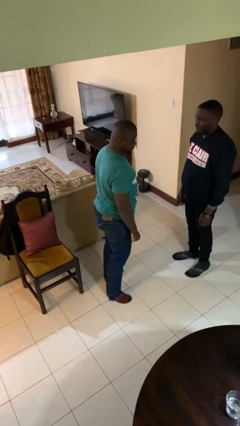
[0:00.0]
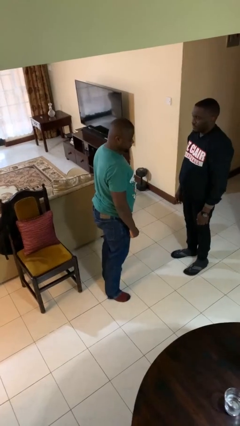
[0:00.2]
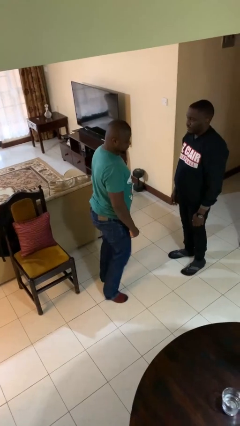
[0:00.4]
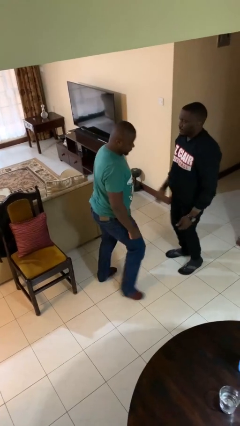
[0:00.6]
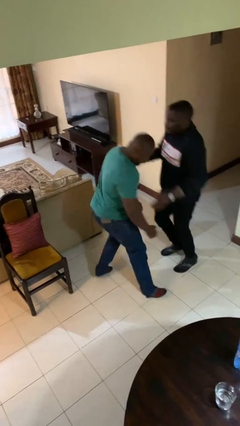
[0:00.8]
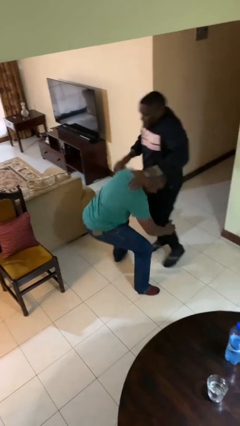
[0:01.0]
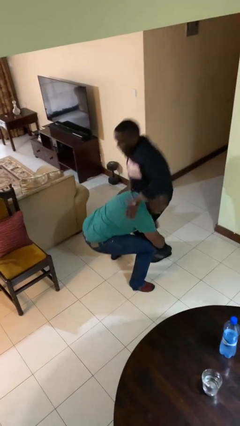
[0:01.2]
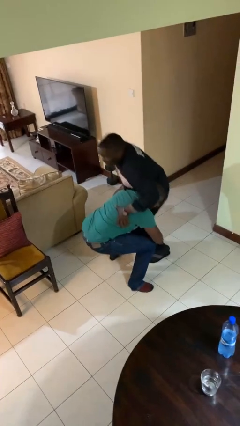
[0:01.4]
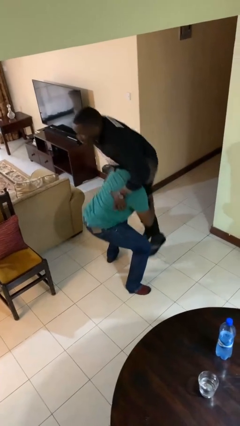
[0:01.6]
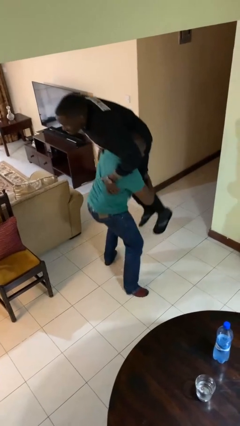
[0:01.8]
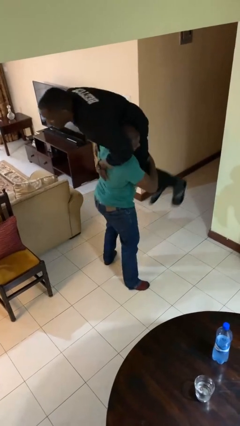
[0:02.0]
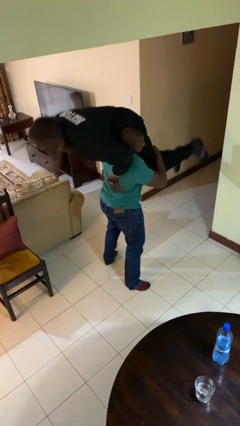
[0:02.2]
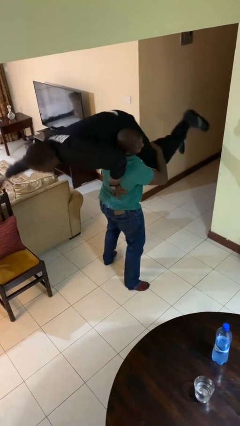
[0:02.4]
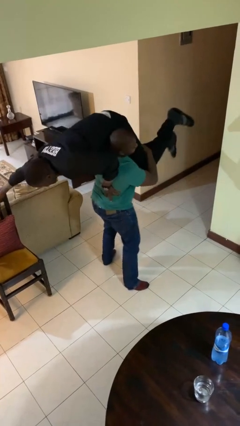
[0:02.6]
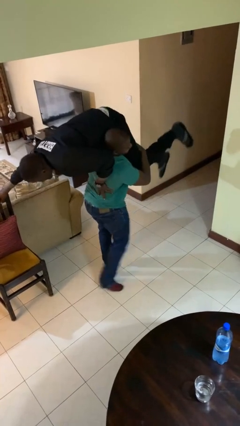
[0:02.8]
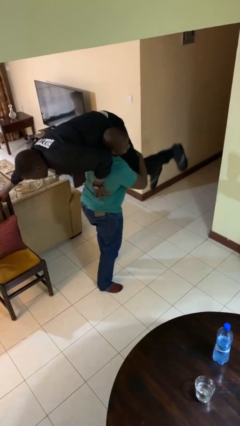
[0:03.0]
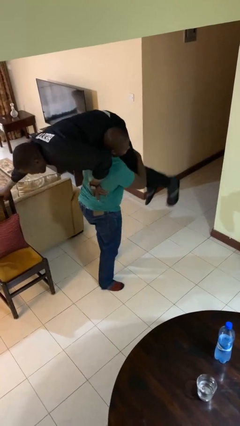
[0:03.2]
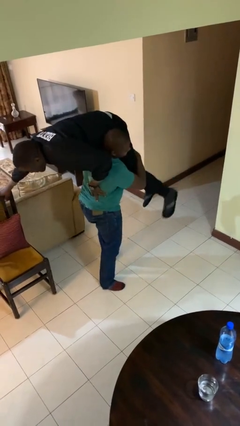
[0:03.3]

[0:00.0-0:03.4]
person carries person over shoulder

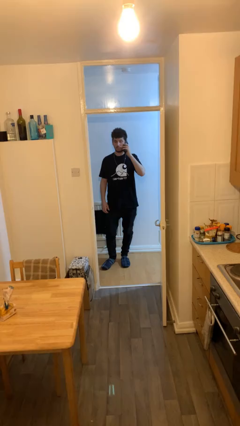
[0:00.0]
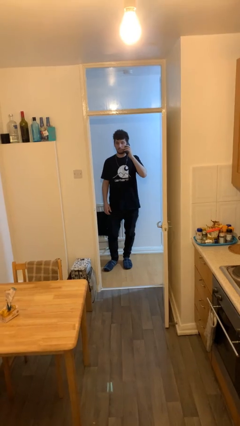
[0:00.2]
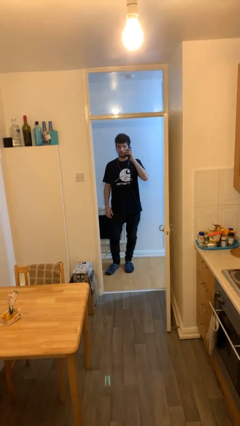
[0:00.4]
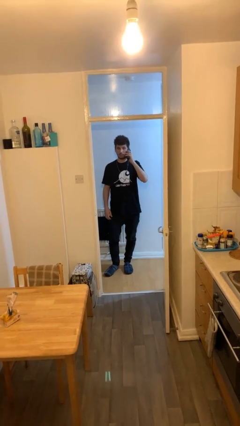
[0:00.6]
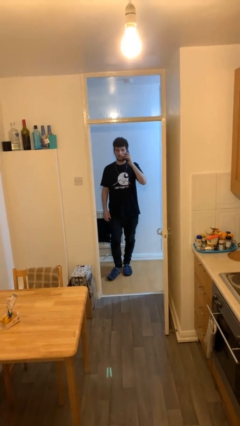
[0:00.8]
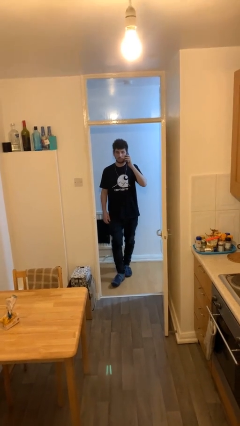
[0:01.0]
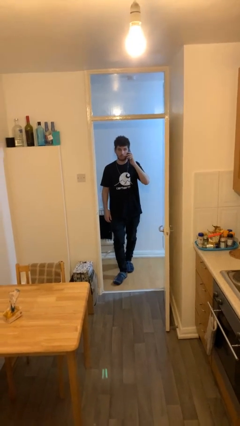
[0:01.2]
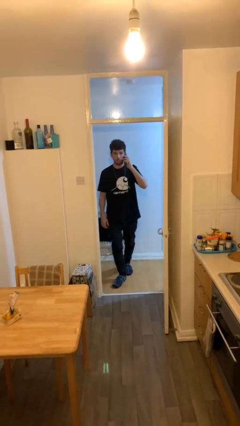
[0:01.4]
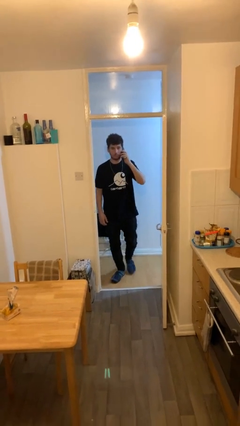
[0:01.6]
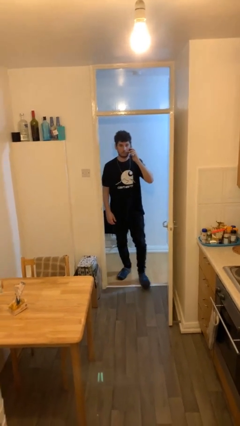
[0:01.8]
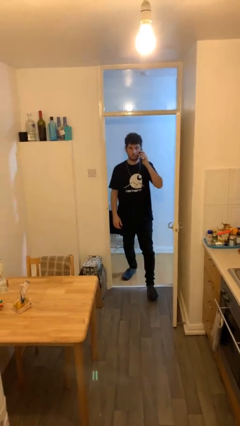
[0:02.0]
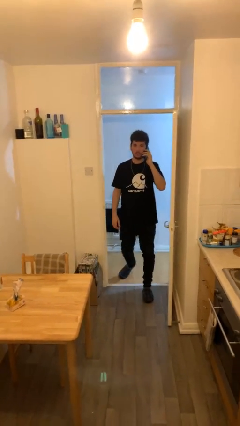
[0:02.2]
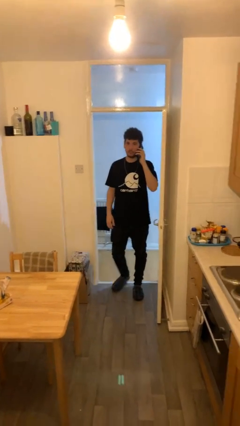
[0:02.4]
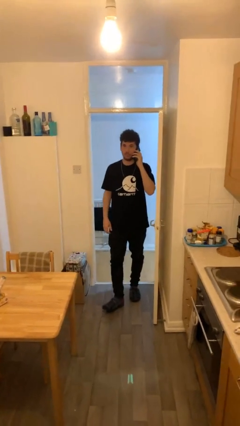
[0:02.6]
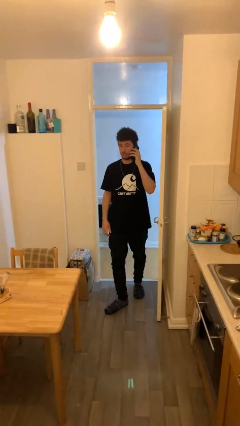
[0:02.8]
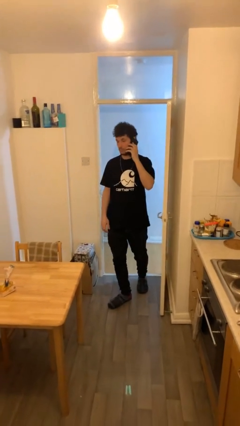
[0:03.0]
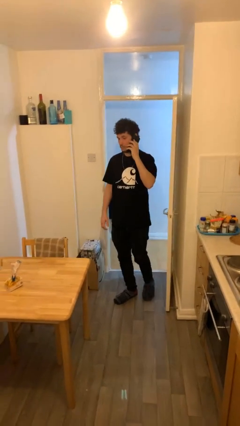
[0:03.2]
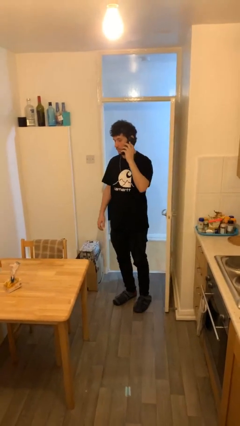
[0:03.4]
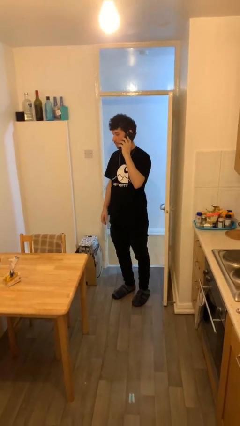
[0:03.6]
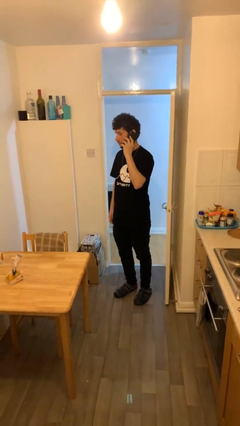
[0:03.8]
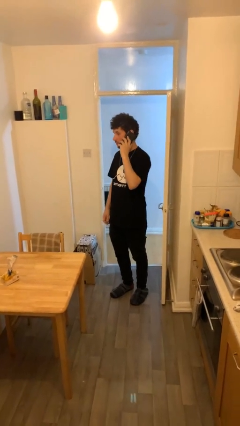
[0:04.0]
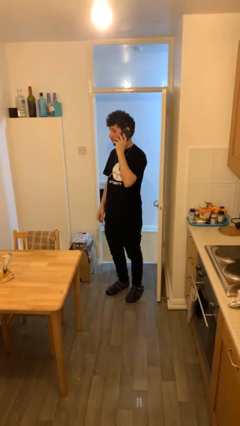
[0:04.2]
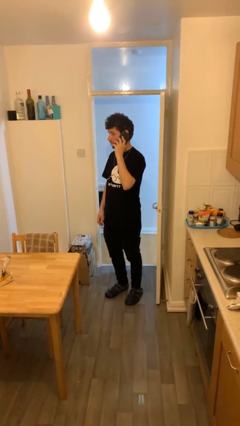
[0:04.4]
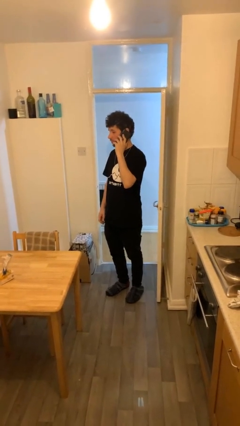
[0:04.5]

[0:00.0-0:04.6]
person enters scene through structure

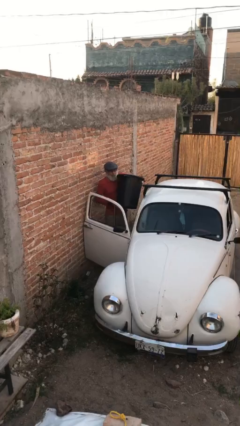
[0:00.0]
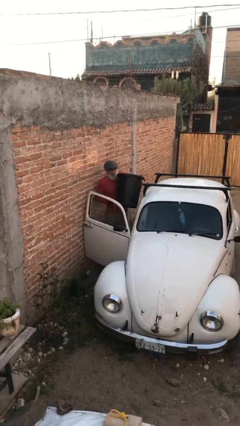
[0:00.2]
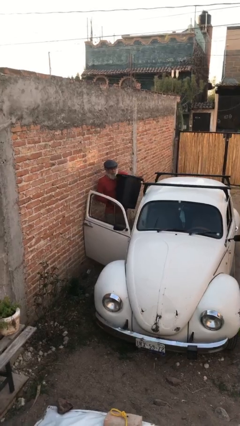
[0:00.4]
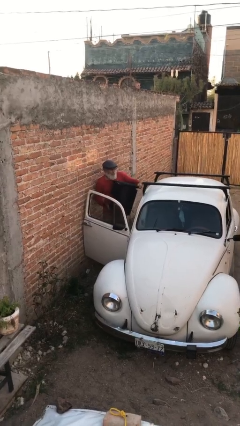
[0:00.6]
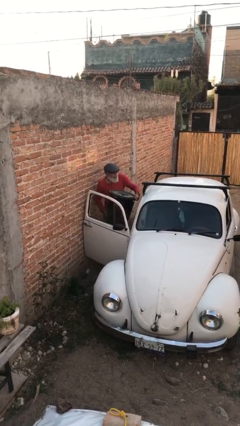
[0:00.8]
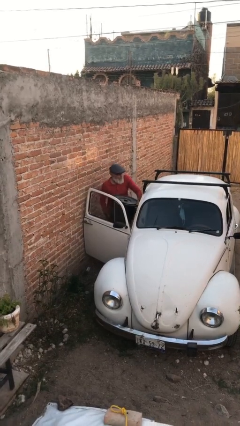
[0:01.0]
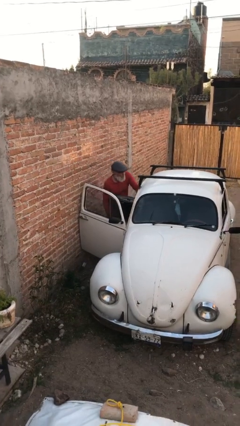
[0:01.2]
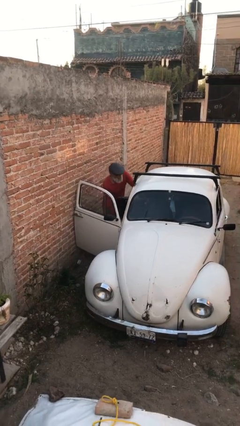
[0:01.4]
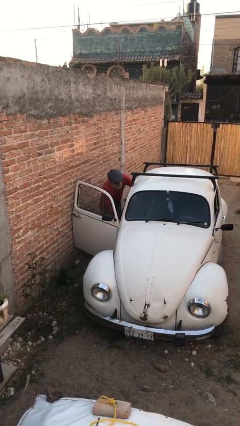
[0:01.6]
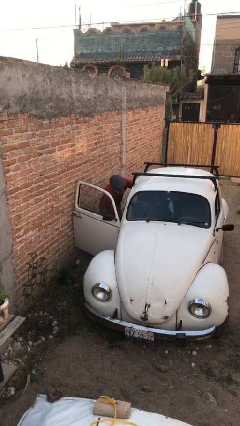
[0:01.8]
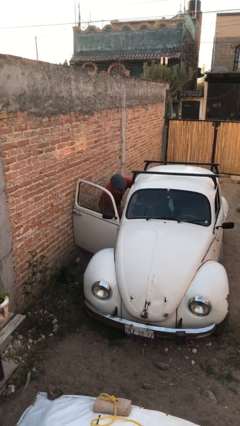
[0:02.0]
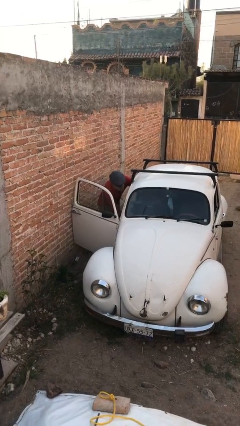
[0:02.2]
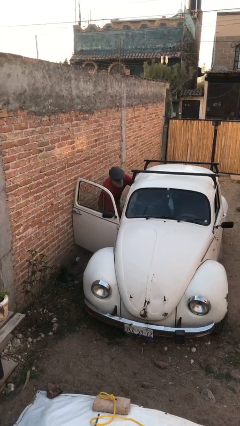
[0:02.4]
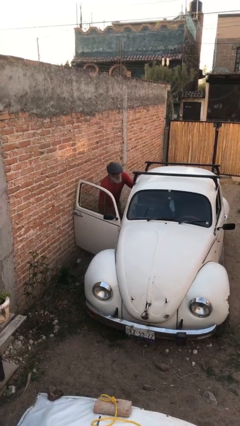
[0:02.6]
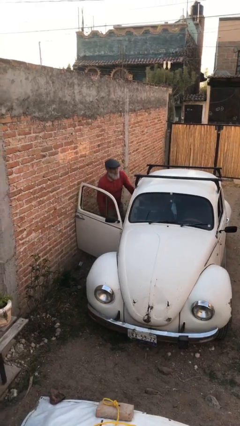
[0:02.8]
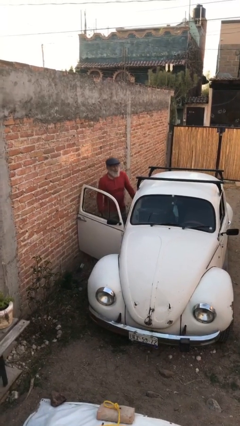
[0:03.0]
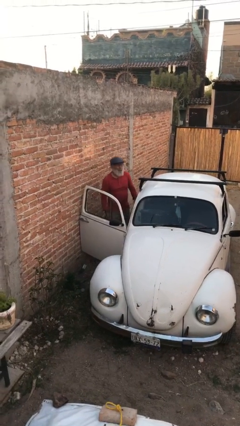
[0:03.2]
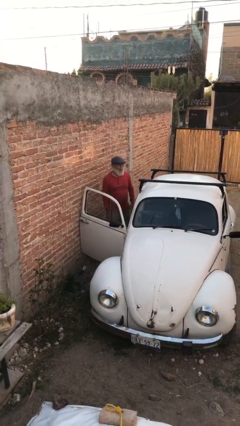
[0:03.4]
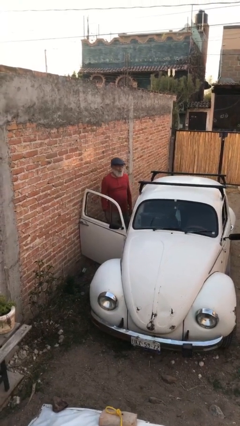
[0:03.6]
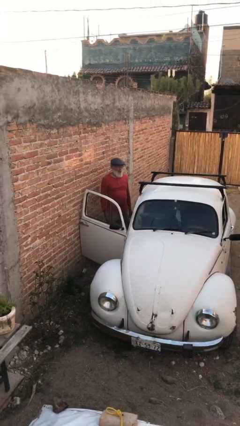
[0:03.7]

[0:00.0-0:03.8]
person loads car

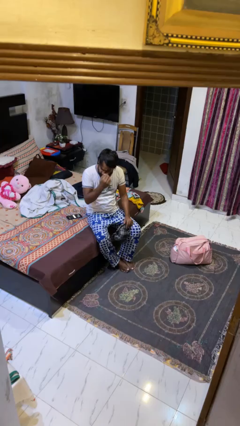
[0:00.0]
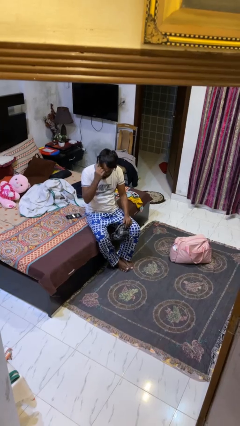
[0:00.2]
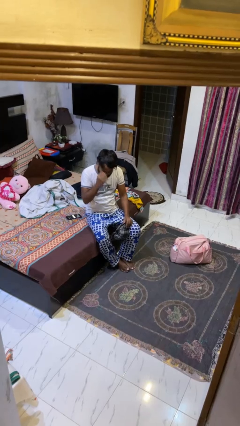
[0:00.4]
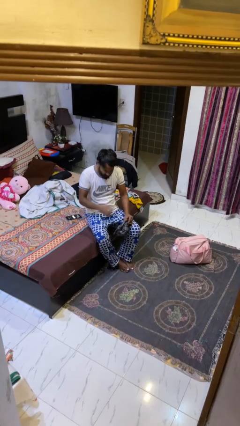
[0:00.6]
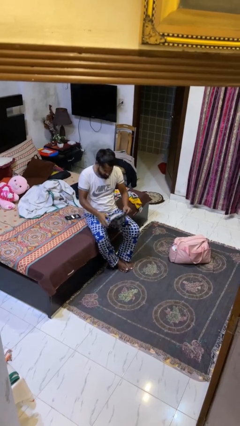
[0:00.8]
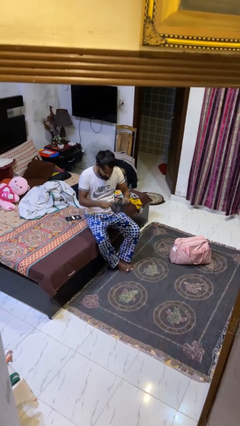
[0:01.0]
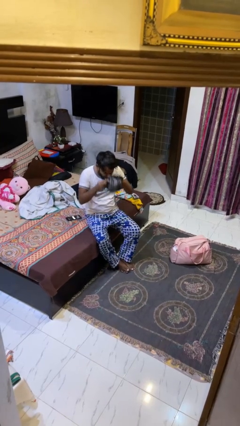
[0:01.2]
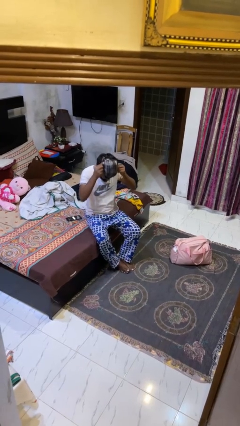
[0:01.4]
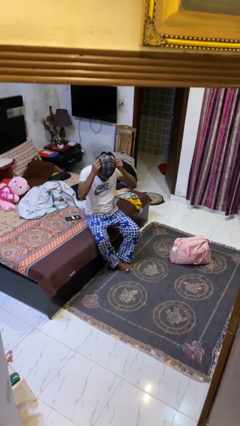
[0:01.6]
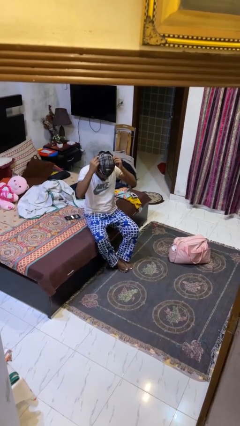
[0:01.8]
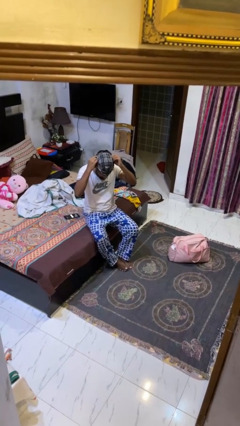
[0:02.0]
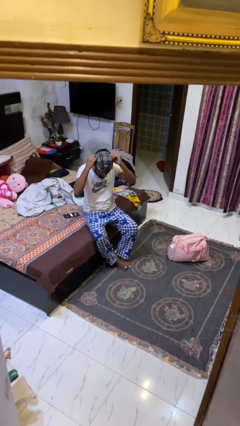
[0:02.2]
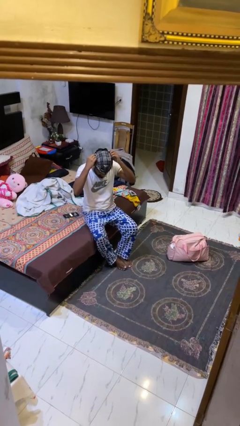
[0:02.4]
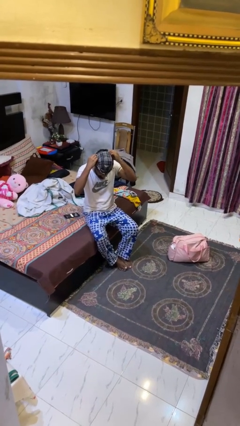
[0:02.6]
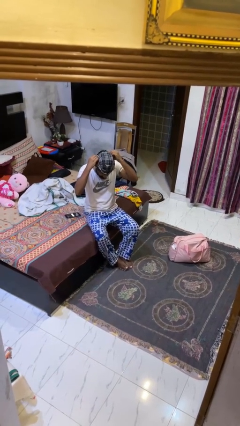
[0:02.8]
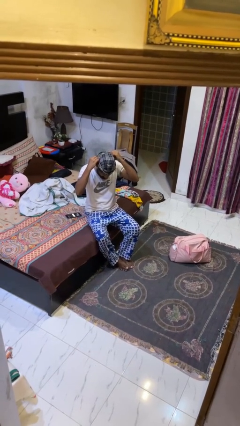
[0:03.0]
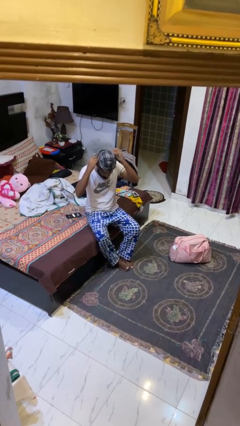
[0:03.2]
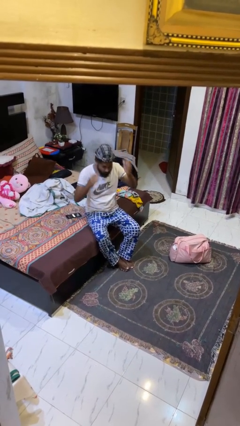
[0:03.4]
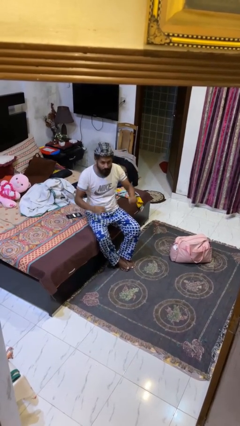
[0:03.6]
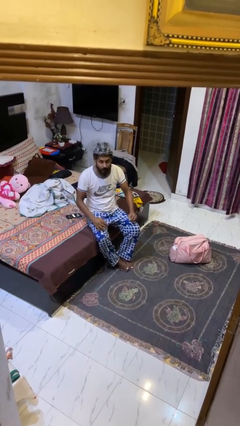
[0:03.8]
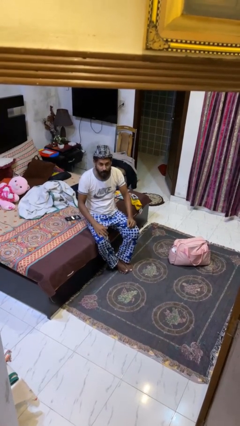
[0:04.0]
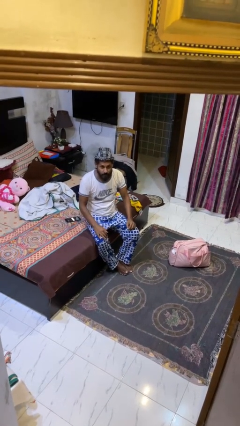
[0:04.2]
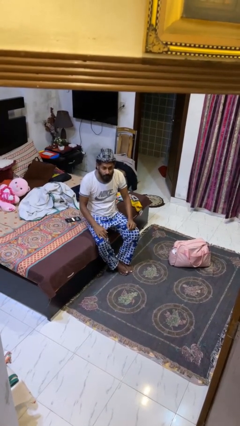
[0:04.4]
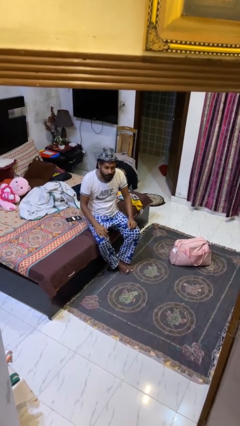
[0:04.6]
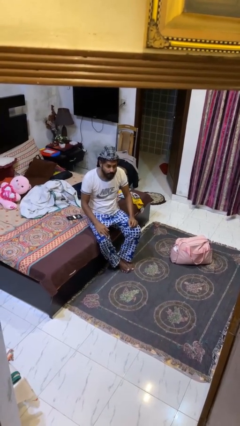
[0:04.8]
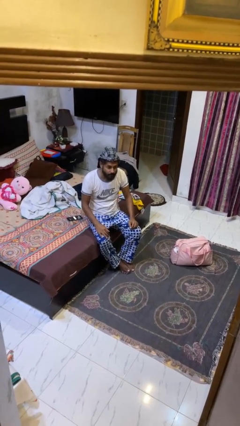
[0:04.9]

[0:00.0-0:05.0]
person puts on hat

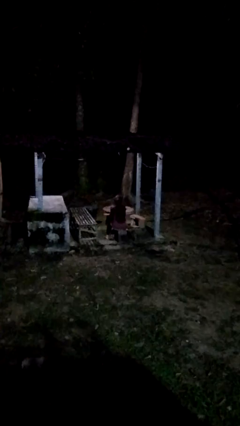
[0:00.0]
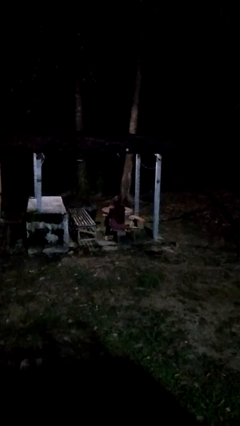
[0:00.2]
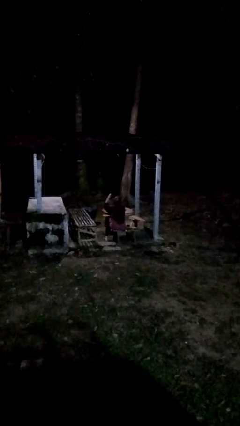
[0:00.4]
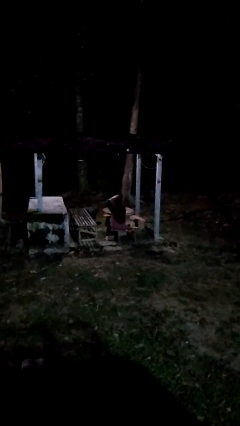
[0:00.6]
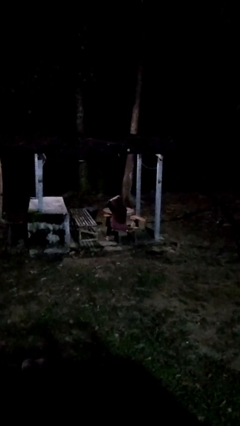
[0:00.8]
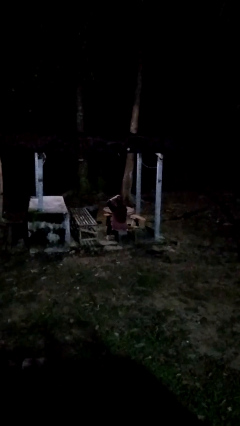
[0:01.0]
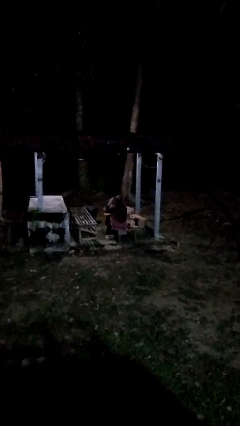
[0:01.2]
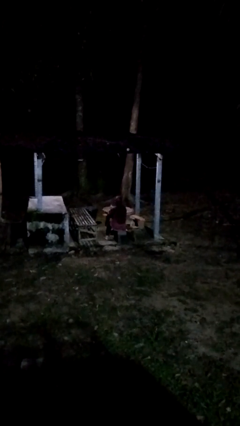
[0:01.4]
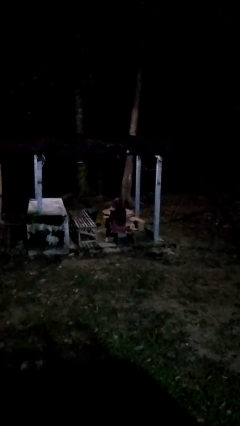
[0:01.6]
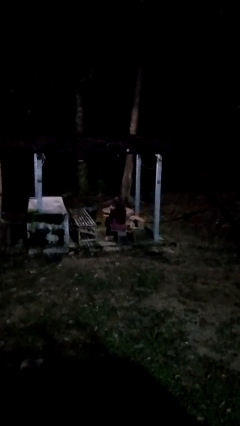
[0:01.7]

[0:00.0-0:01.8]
person pats head
